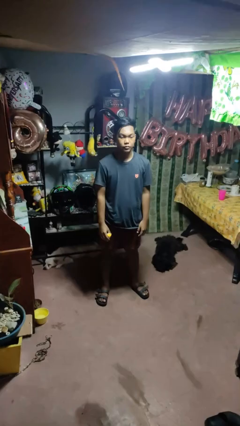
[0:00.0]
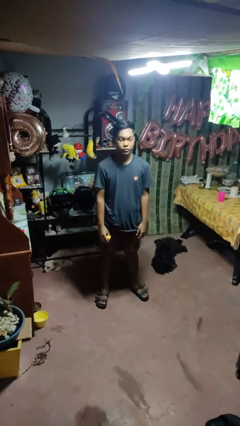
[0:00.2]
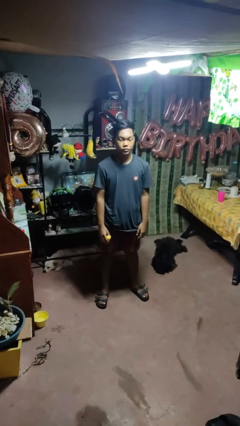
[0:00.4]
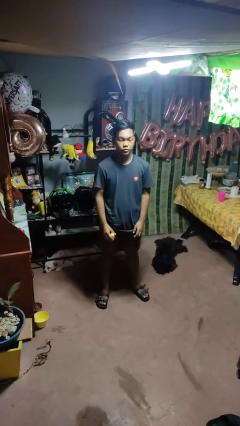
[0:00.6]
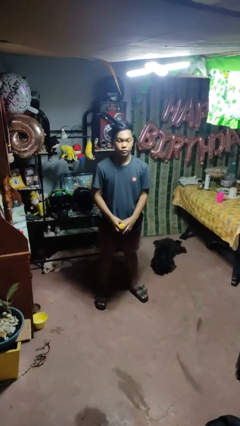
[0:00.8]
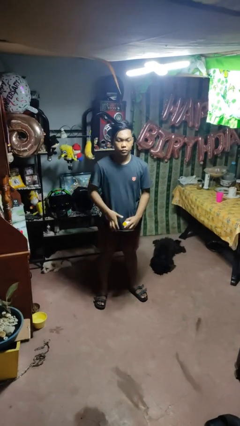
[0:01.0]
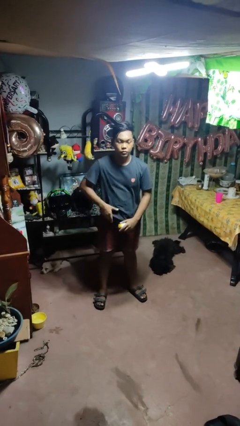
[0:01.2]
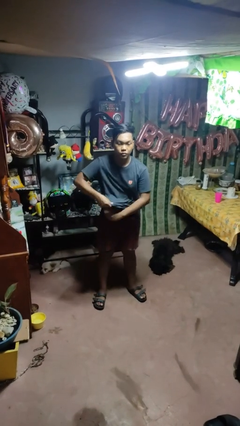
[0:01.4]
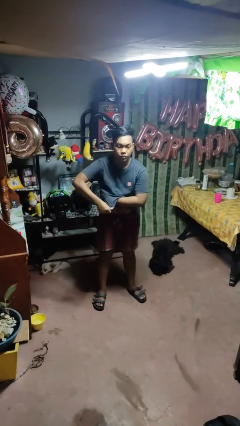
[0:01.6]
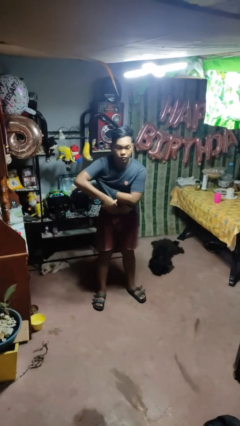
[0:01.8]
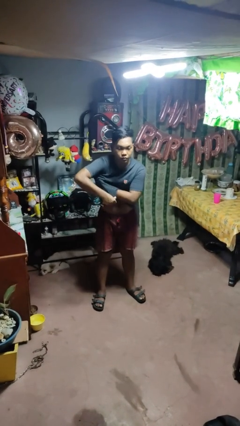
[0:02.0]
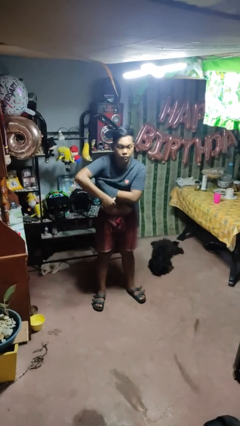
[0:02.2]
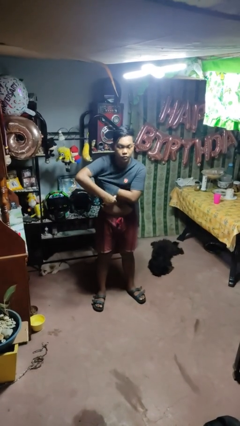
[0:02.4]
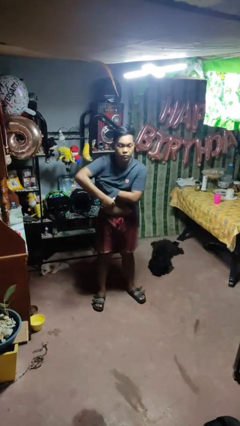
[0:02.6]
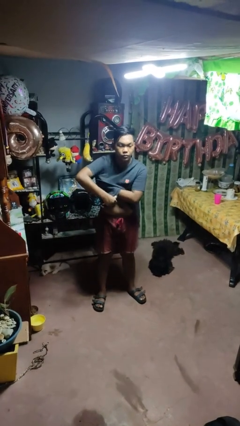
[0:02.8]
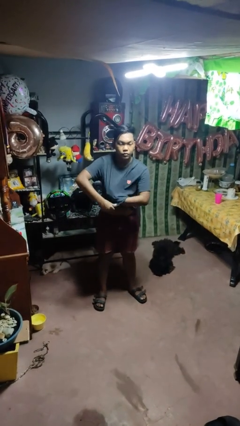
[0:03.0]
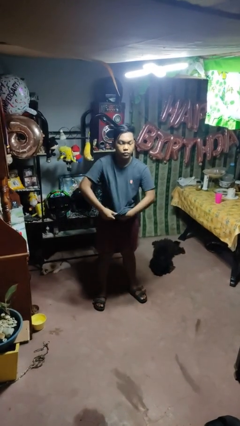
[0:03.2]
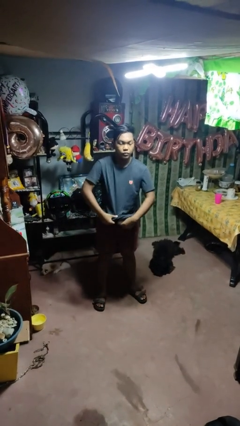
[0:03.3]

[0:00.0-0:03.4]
person applies deodorant

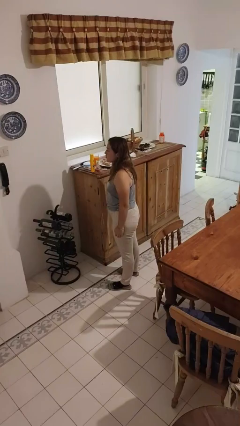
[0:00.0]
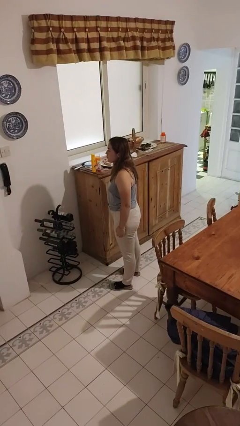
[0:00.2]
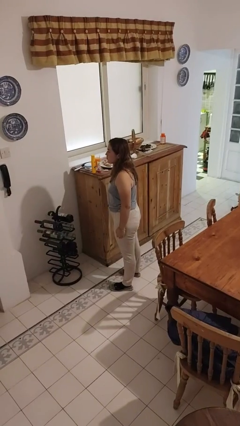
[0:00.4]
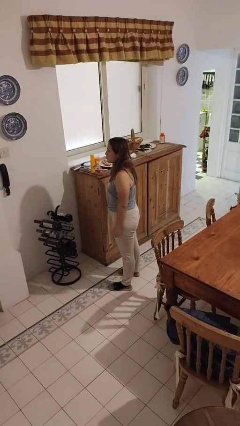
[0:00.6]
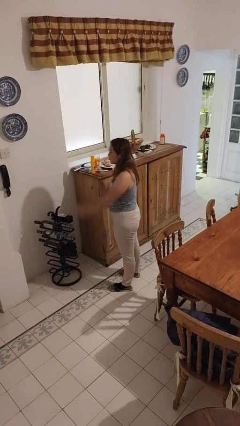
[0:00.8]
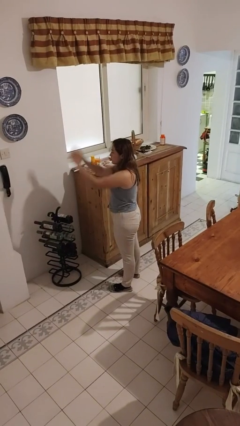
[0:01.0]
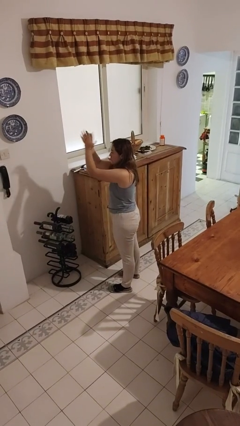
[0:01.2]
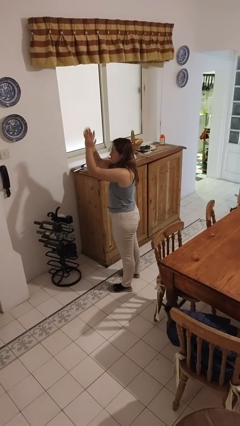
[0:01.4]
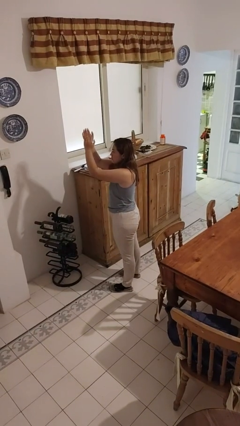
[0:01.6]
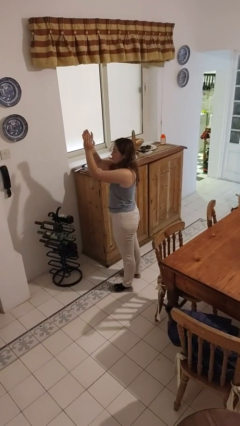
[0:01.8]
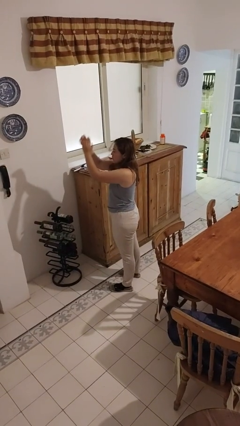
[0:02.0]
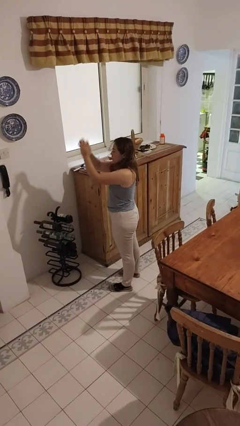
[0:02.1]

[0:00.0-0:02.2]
person claps hands

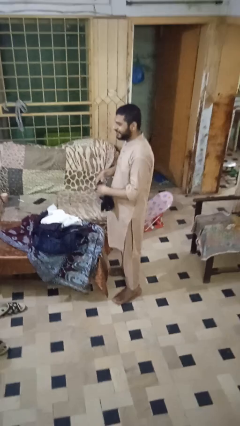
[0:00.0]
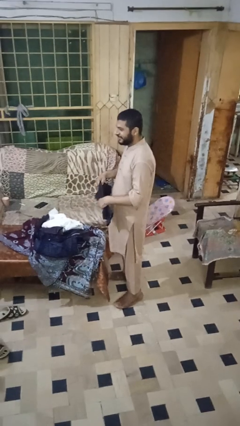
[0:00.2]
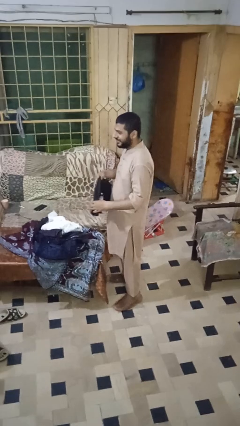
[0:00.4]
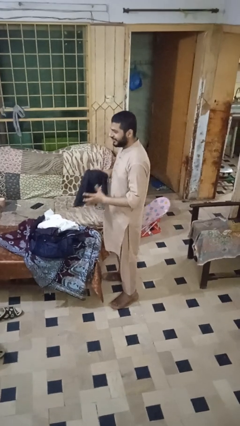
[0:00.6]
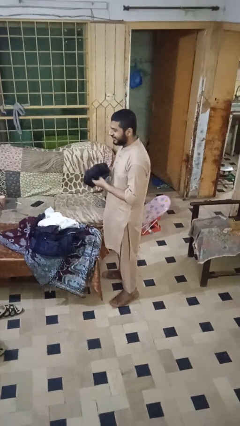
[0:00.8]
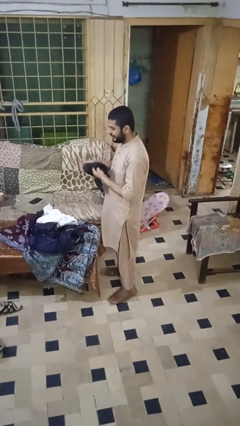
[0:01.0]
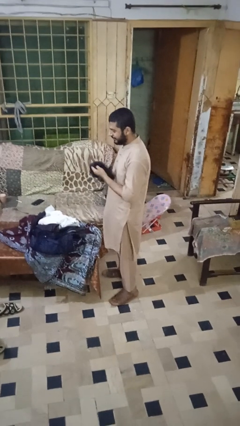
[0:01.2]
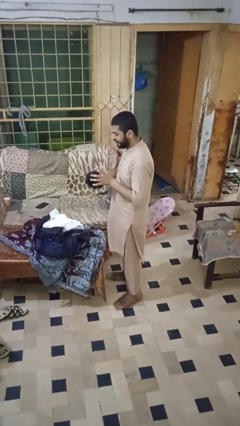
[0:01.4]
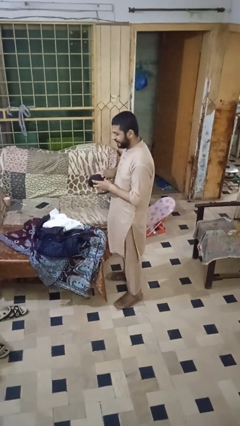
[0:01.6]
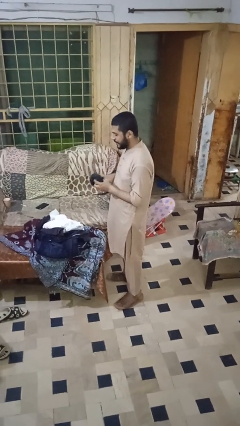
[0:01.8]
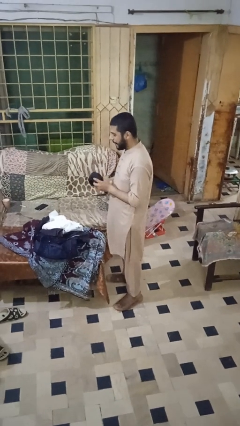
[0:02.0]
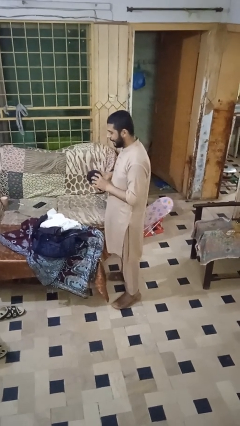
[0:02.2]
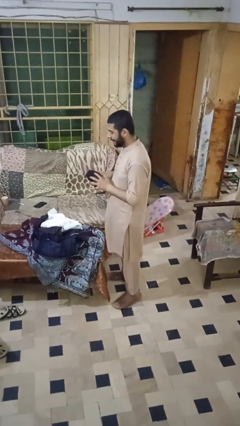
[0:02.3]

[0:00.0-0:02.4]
person folds shirt

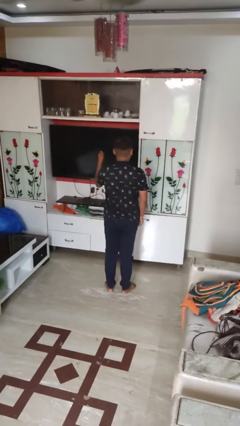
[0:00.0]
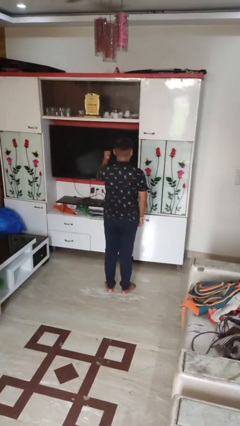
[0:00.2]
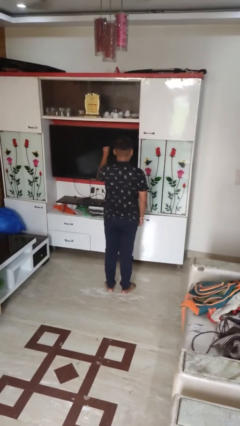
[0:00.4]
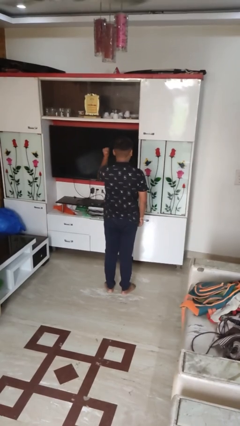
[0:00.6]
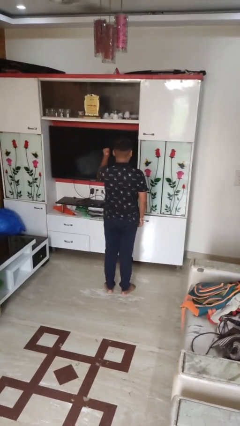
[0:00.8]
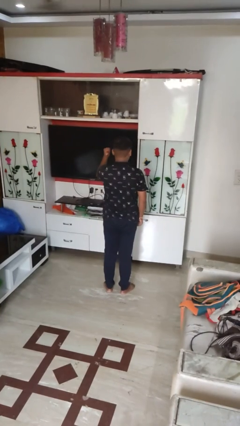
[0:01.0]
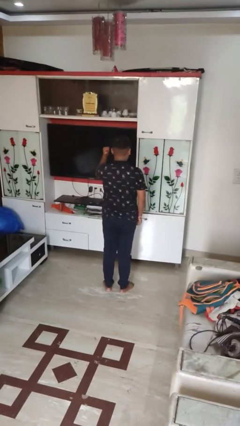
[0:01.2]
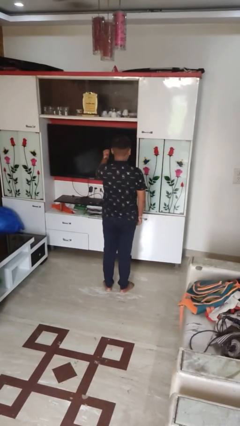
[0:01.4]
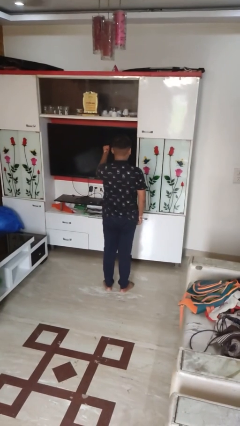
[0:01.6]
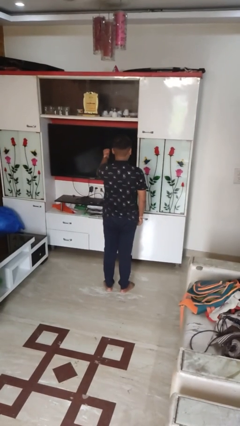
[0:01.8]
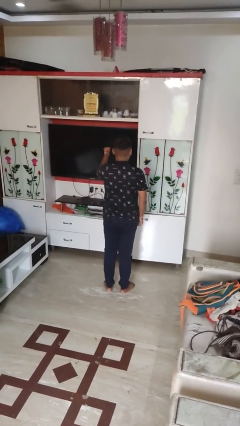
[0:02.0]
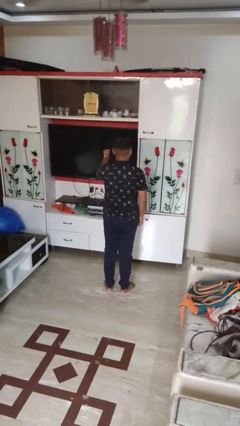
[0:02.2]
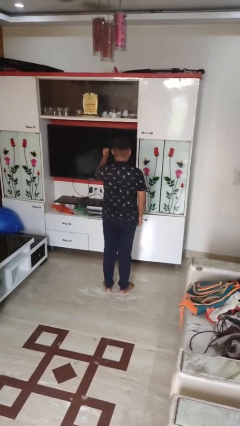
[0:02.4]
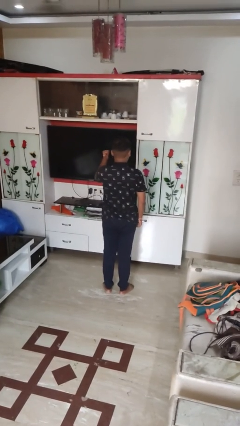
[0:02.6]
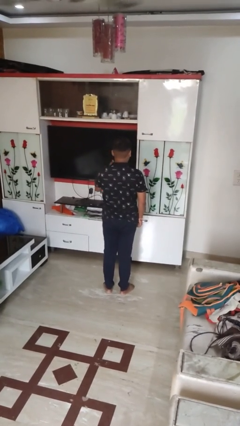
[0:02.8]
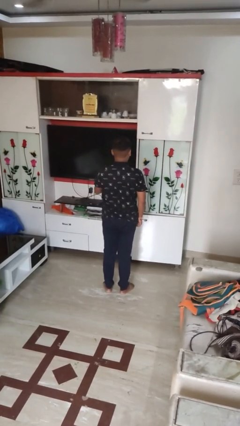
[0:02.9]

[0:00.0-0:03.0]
person gestures behind me

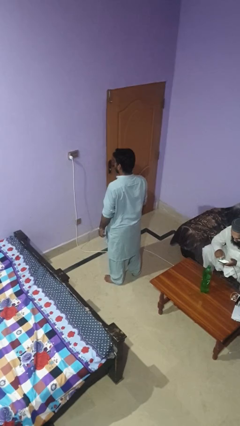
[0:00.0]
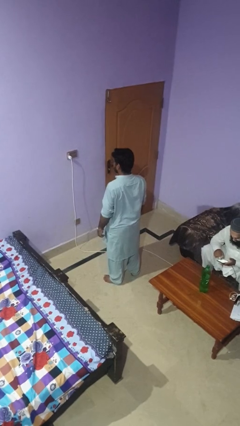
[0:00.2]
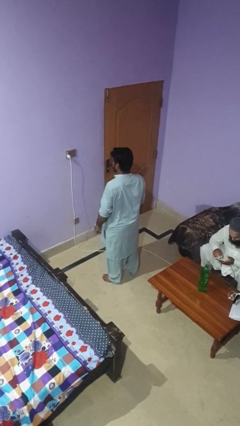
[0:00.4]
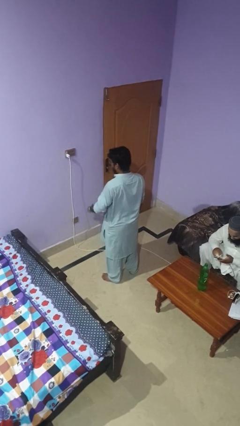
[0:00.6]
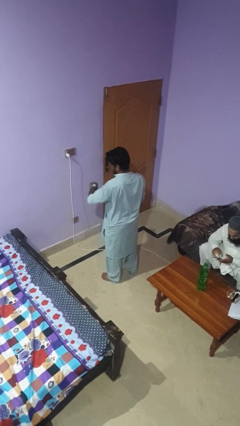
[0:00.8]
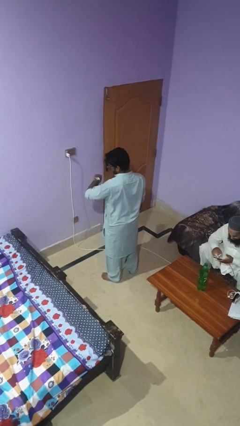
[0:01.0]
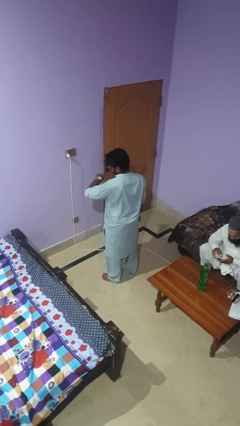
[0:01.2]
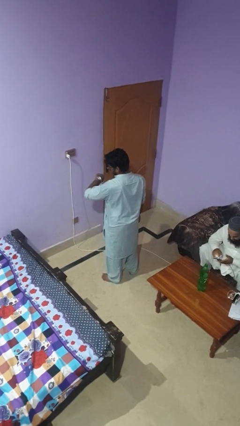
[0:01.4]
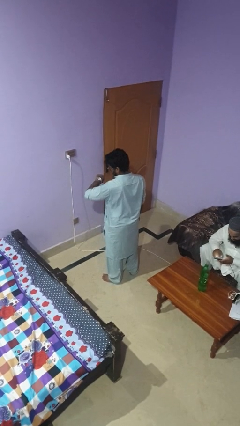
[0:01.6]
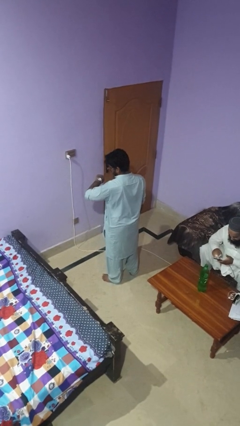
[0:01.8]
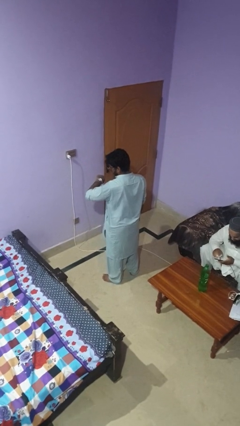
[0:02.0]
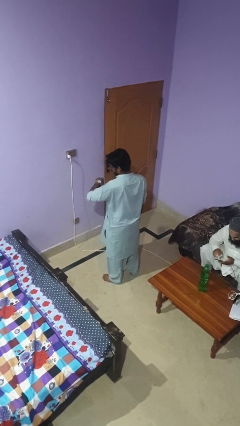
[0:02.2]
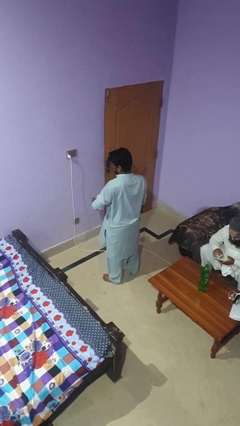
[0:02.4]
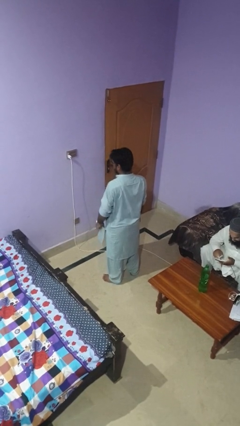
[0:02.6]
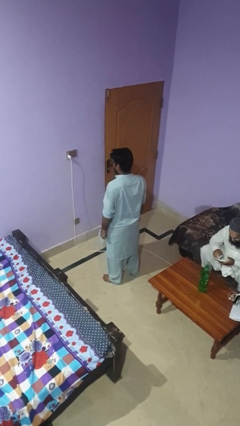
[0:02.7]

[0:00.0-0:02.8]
person looks at wristwatch

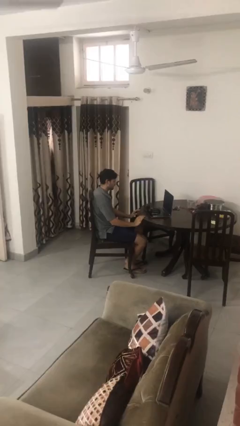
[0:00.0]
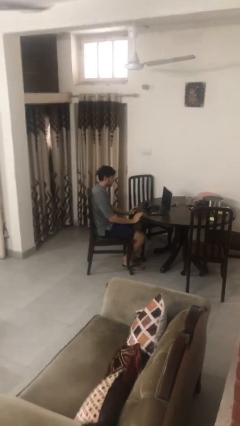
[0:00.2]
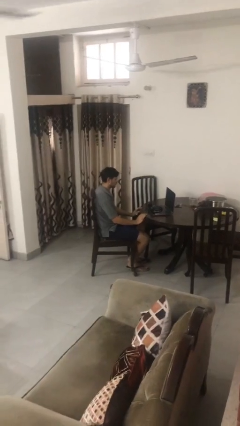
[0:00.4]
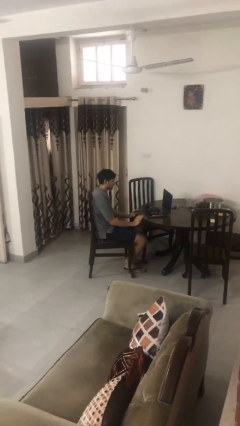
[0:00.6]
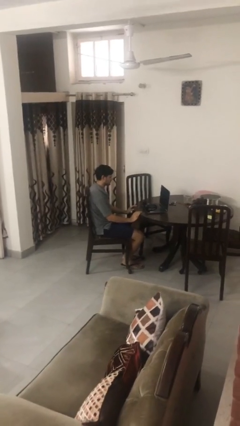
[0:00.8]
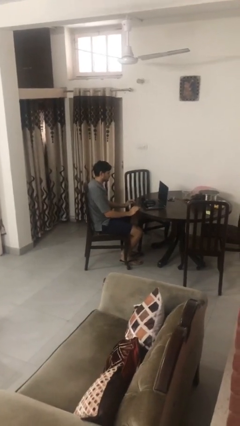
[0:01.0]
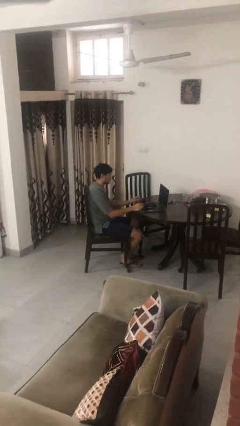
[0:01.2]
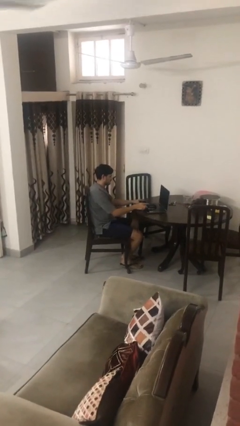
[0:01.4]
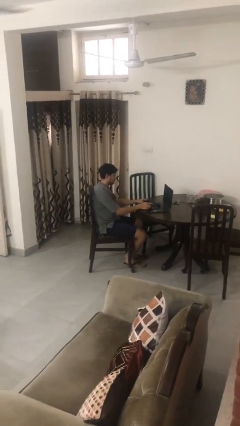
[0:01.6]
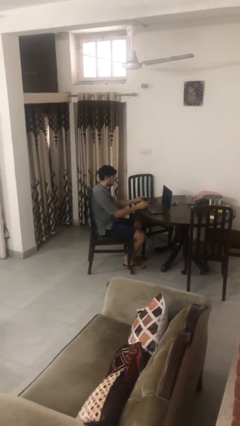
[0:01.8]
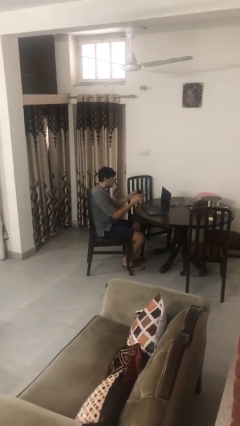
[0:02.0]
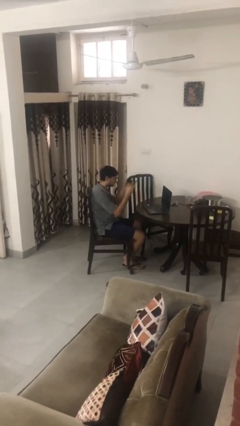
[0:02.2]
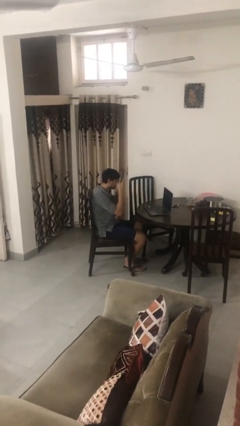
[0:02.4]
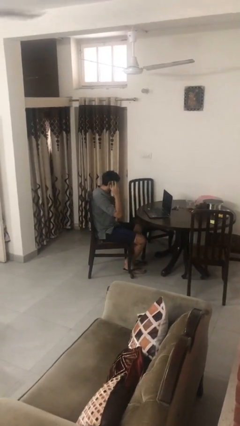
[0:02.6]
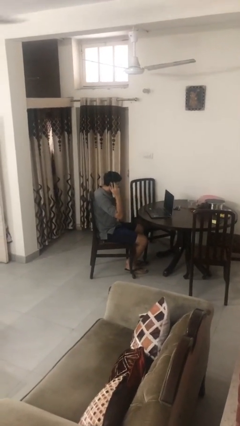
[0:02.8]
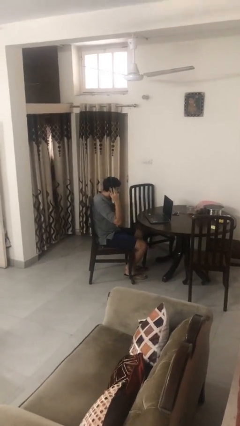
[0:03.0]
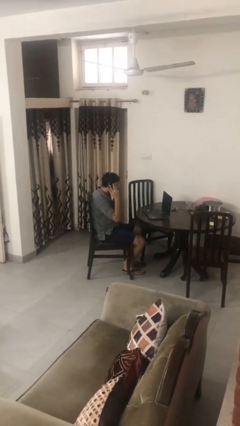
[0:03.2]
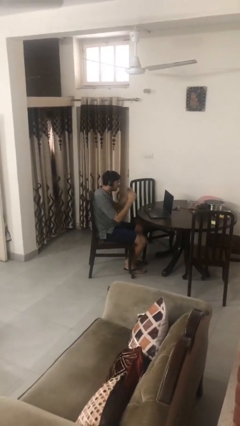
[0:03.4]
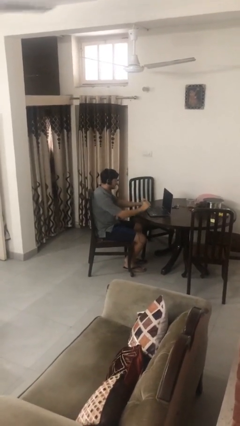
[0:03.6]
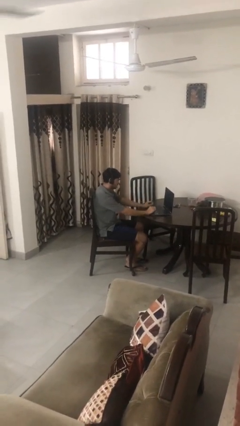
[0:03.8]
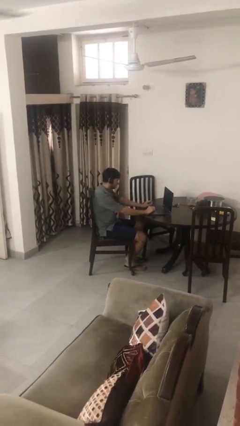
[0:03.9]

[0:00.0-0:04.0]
person puts on headphones
